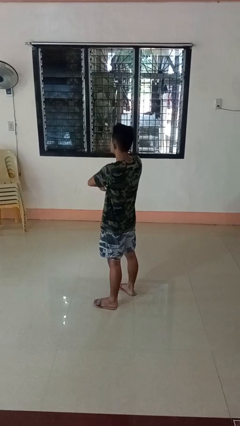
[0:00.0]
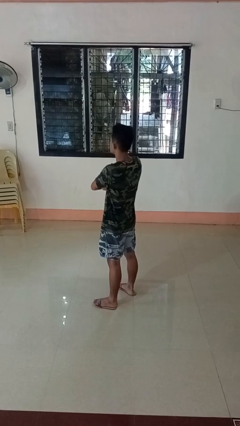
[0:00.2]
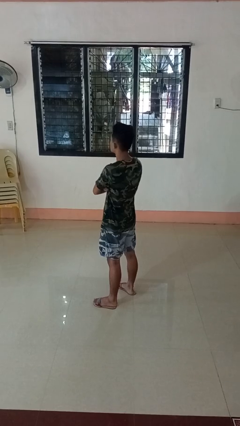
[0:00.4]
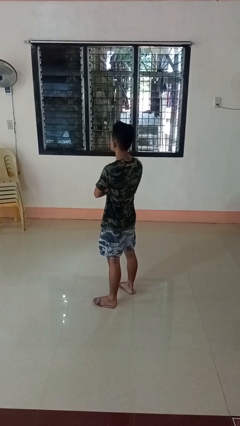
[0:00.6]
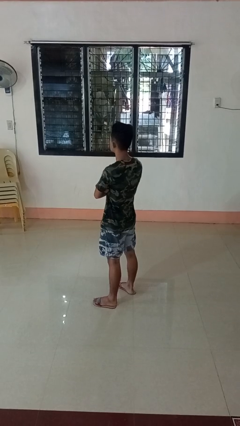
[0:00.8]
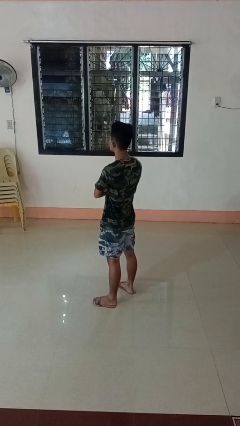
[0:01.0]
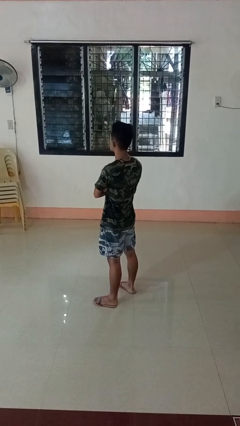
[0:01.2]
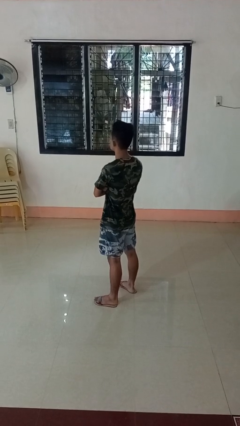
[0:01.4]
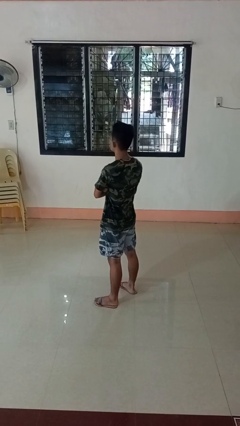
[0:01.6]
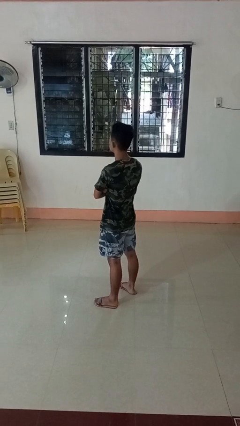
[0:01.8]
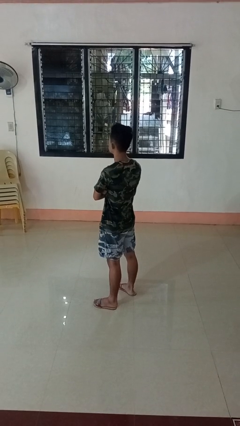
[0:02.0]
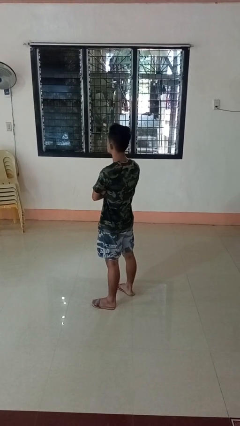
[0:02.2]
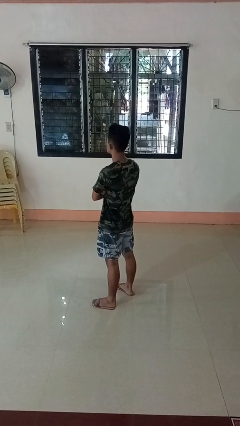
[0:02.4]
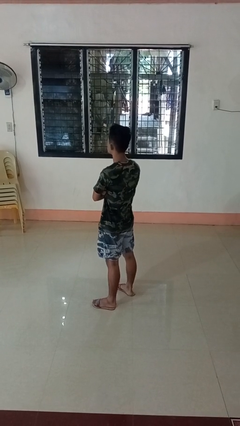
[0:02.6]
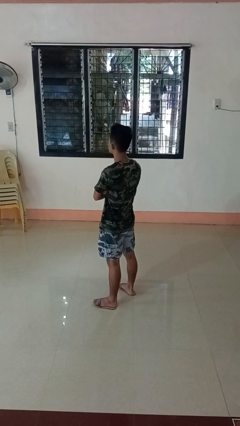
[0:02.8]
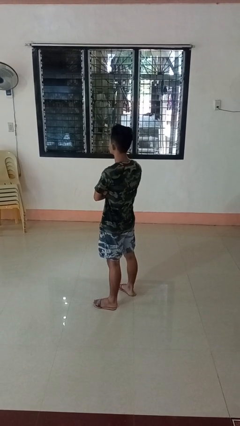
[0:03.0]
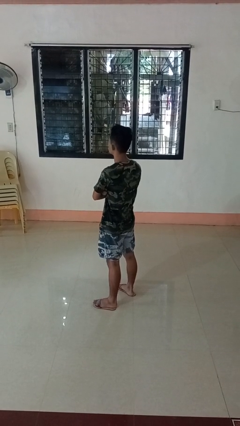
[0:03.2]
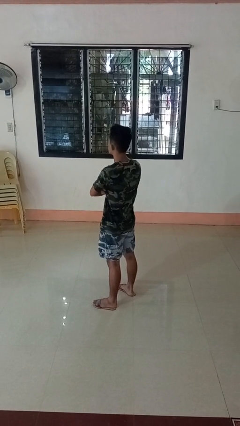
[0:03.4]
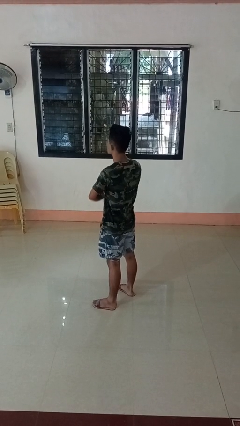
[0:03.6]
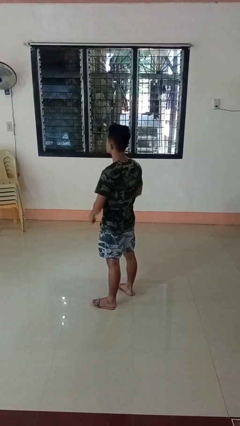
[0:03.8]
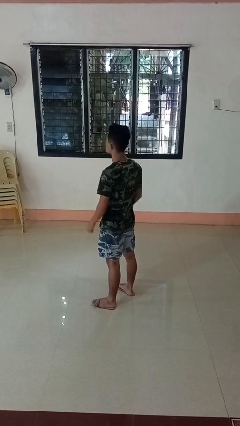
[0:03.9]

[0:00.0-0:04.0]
person crosses arms

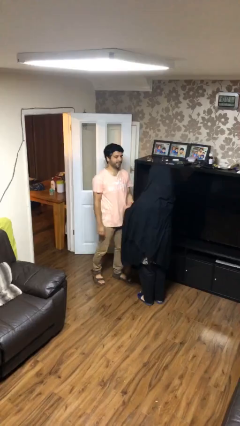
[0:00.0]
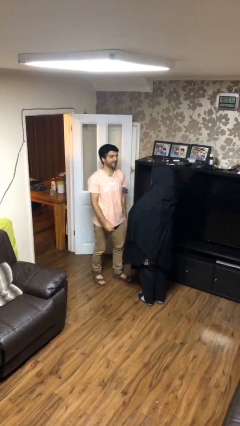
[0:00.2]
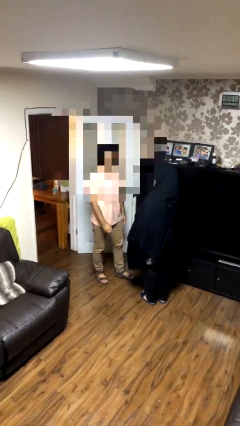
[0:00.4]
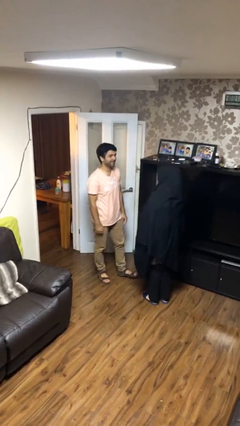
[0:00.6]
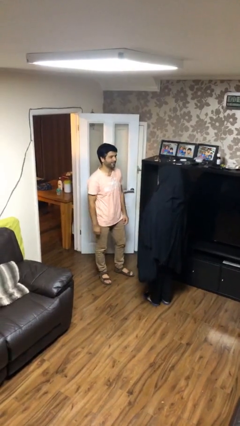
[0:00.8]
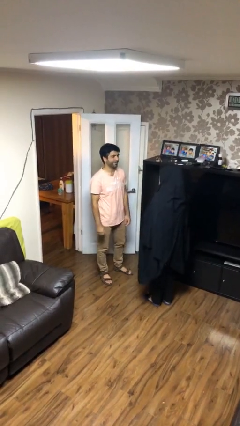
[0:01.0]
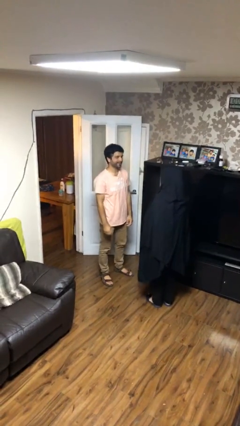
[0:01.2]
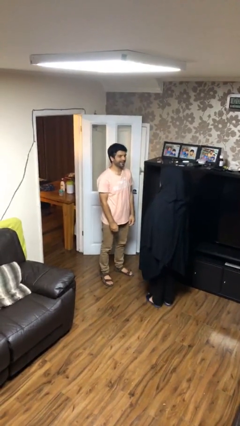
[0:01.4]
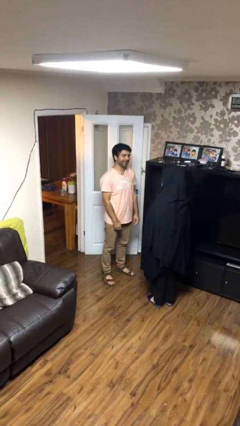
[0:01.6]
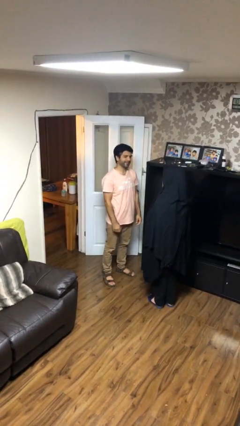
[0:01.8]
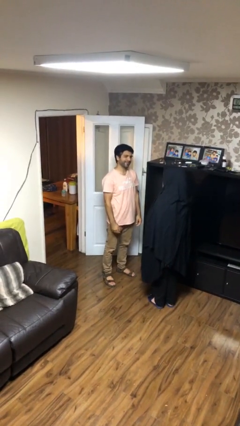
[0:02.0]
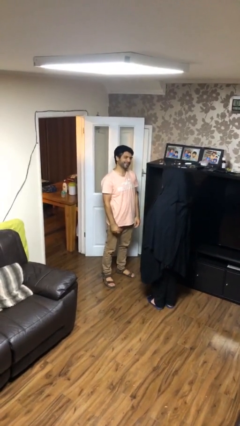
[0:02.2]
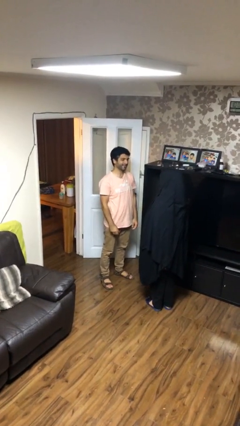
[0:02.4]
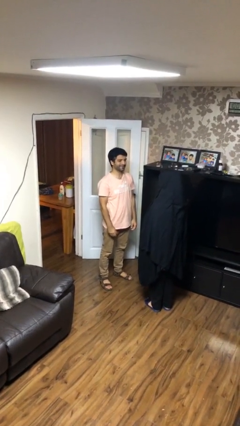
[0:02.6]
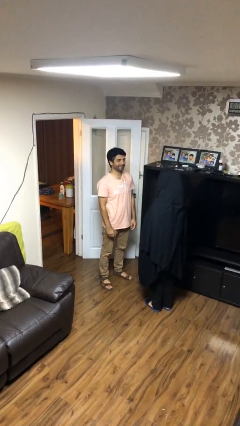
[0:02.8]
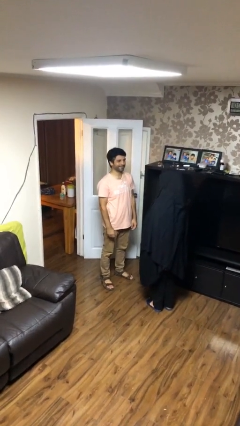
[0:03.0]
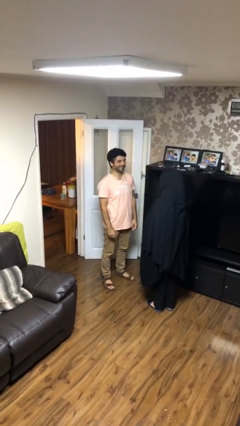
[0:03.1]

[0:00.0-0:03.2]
person talks to person

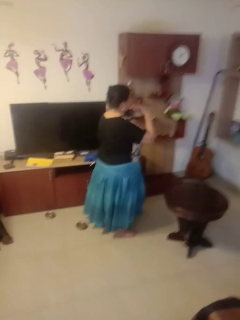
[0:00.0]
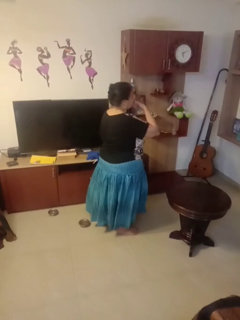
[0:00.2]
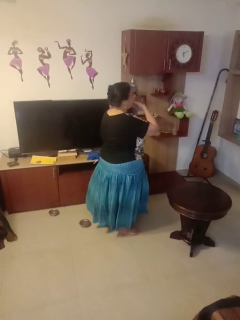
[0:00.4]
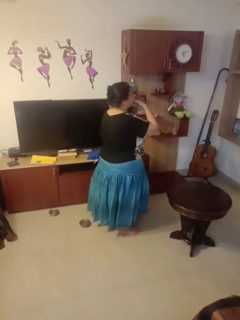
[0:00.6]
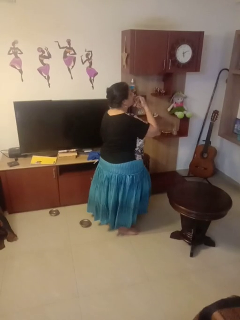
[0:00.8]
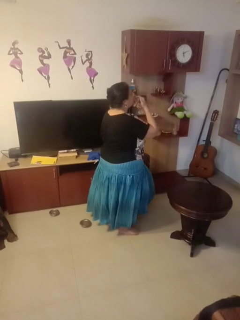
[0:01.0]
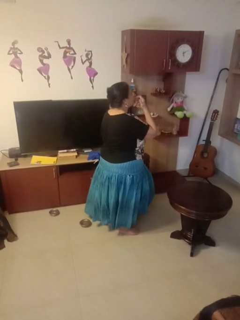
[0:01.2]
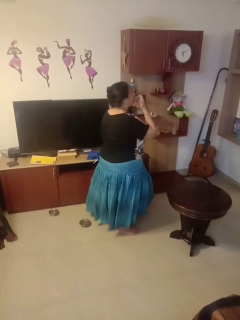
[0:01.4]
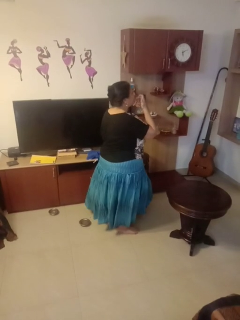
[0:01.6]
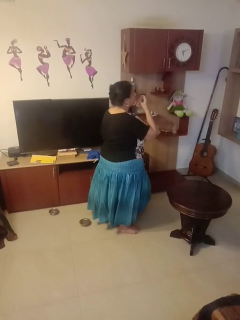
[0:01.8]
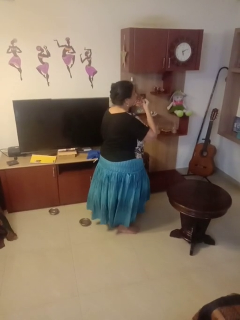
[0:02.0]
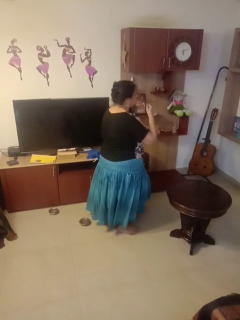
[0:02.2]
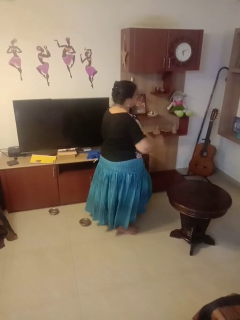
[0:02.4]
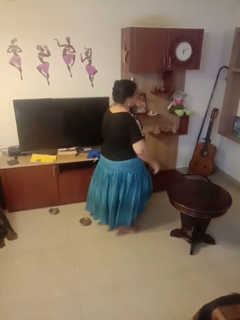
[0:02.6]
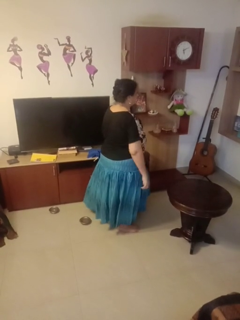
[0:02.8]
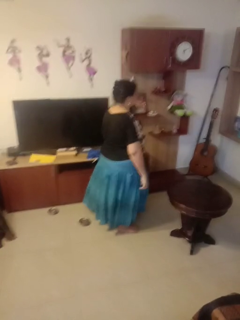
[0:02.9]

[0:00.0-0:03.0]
person licks fingers

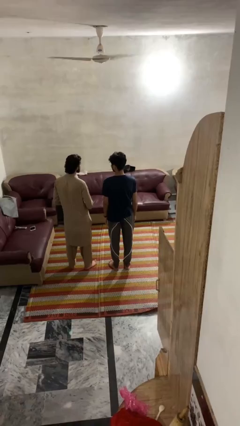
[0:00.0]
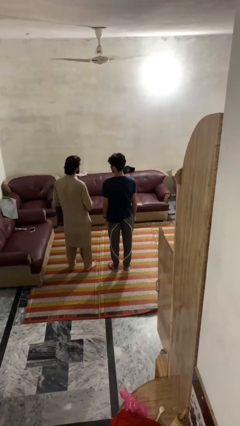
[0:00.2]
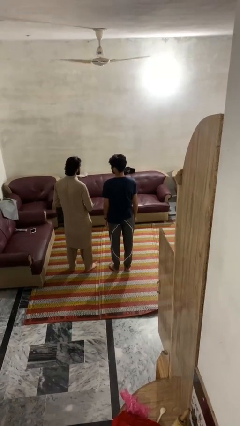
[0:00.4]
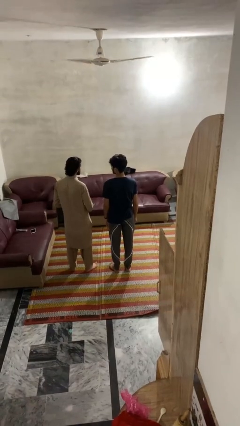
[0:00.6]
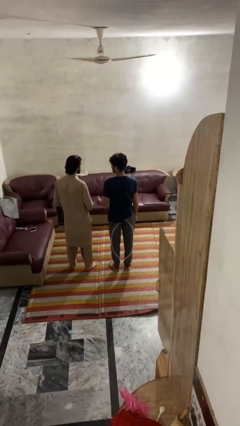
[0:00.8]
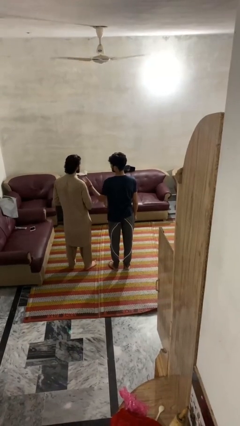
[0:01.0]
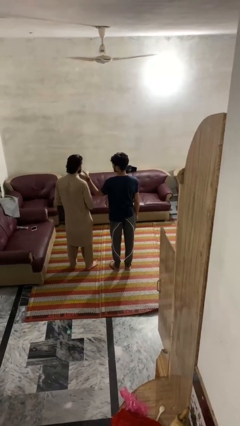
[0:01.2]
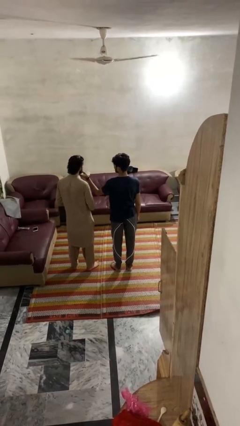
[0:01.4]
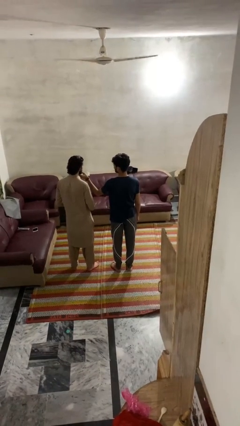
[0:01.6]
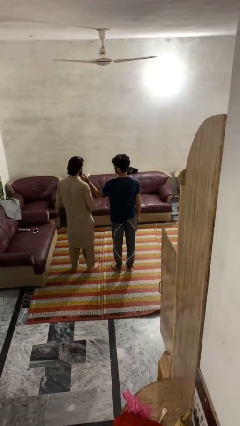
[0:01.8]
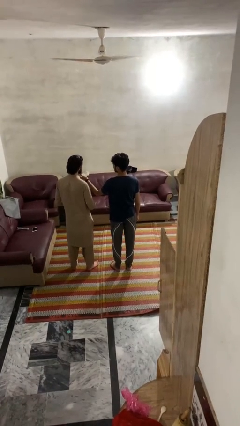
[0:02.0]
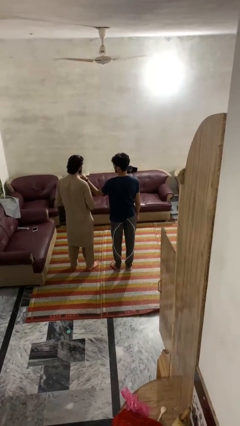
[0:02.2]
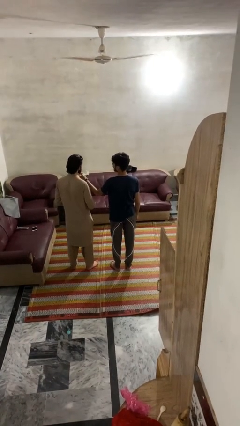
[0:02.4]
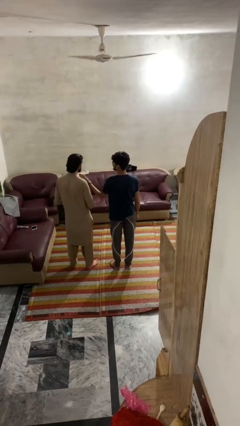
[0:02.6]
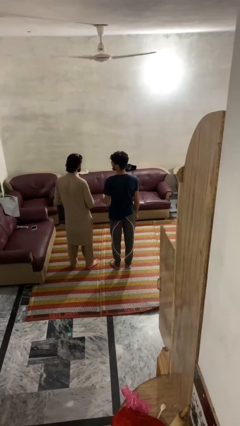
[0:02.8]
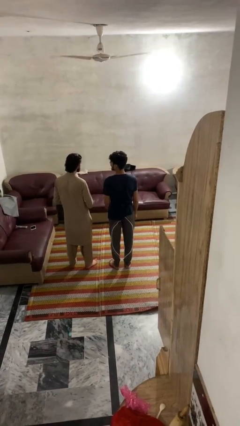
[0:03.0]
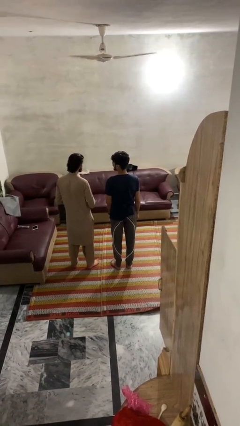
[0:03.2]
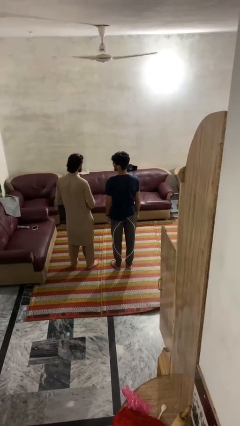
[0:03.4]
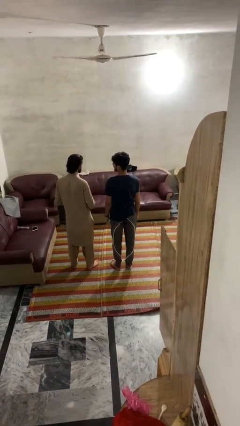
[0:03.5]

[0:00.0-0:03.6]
person touches face of person

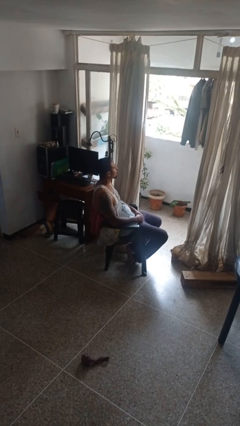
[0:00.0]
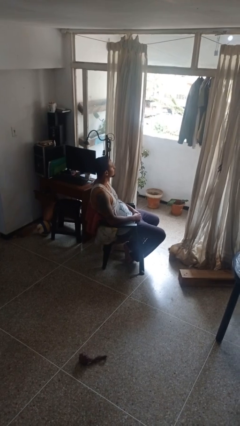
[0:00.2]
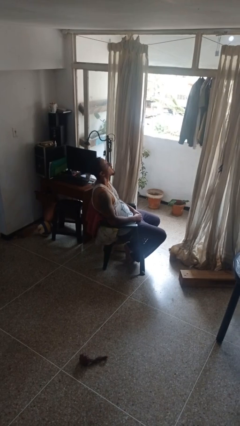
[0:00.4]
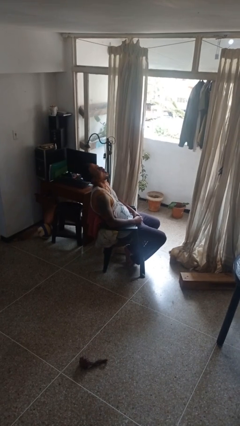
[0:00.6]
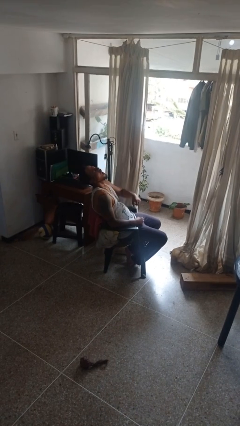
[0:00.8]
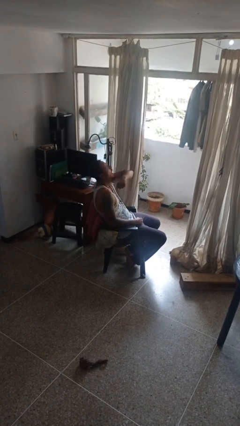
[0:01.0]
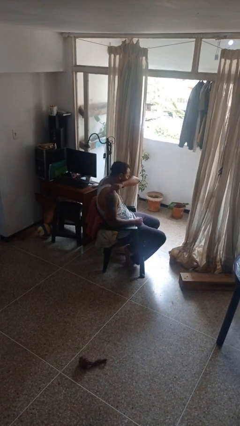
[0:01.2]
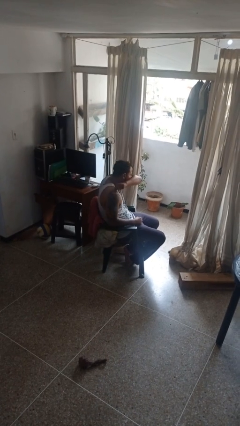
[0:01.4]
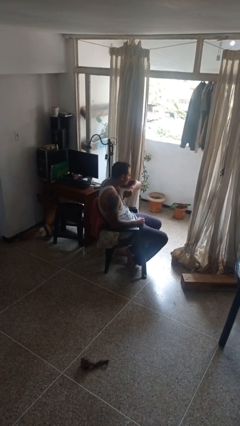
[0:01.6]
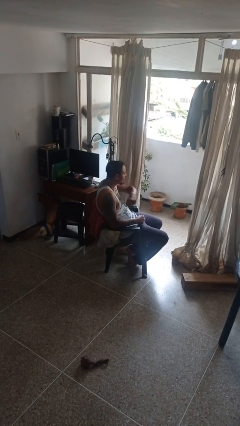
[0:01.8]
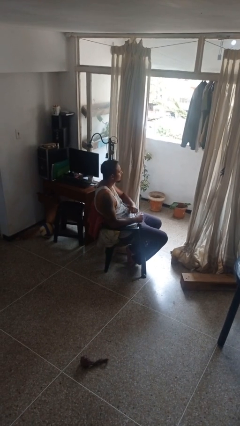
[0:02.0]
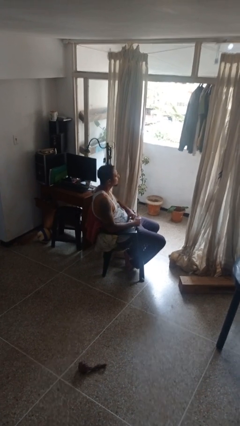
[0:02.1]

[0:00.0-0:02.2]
person sneezes into arm

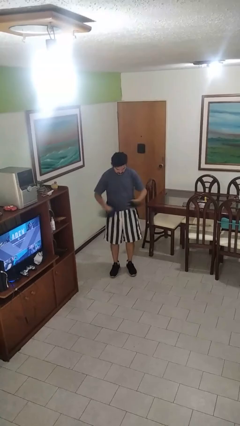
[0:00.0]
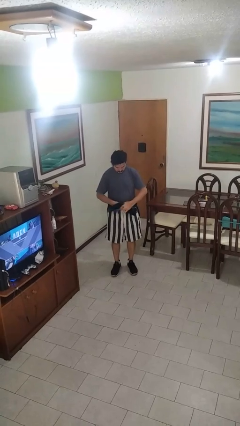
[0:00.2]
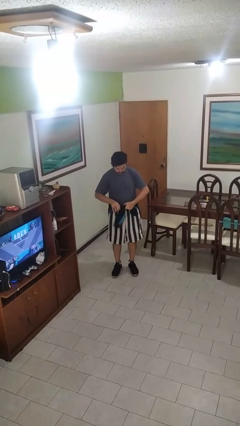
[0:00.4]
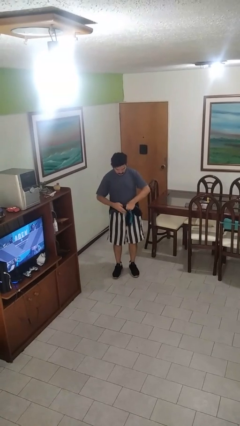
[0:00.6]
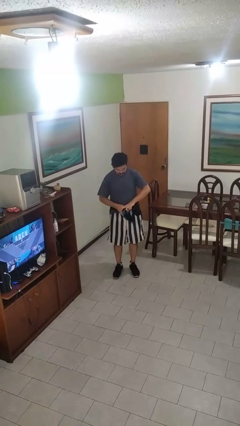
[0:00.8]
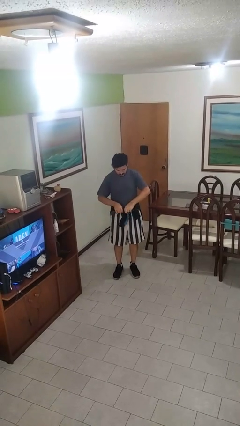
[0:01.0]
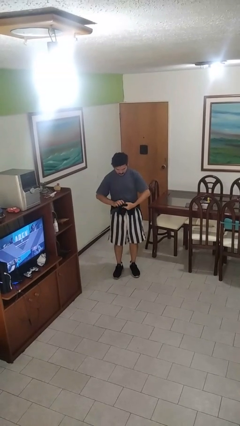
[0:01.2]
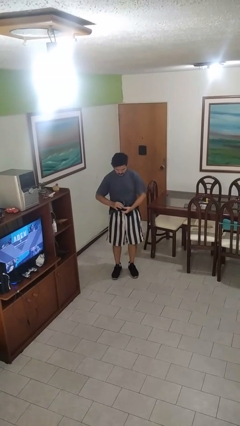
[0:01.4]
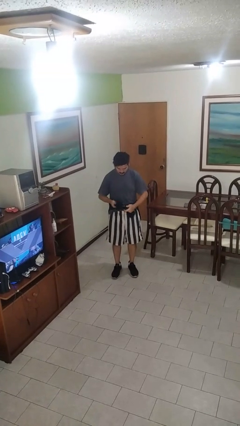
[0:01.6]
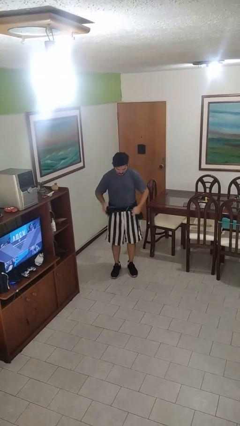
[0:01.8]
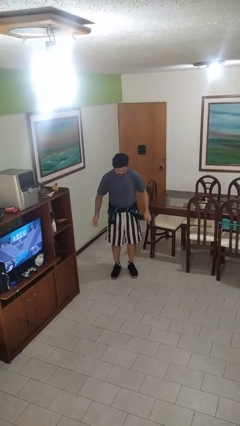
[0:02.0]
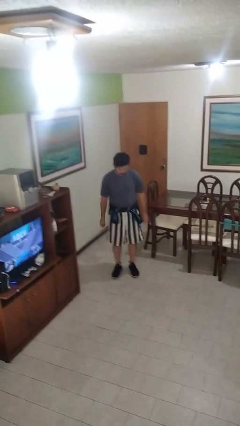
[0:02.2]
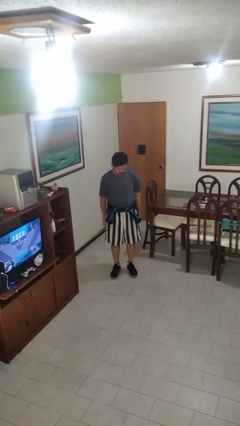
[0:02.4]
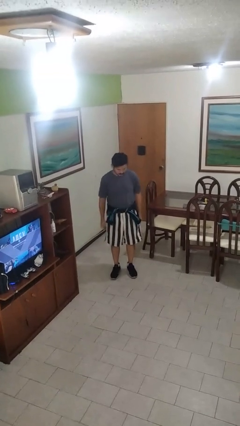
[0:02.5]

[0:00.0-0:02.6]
person ties jacket around waist
